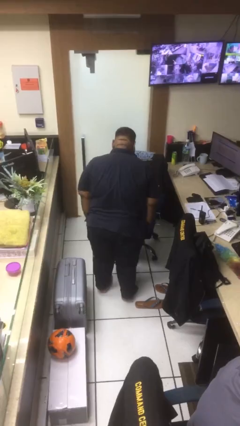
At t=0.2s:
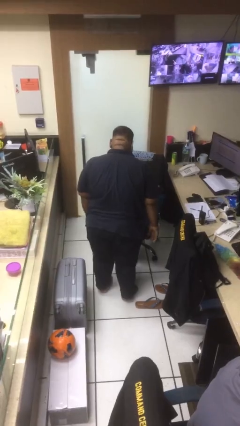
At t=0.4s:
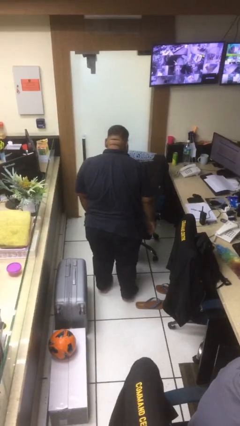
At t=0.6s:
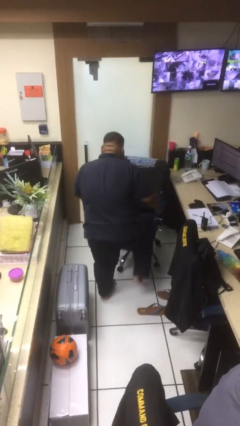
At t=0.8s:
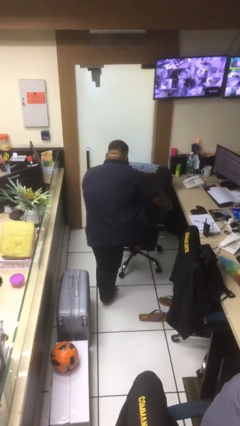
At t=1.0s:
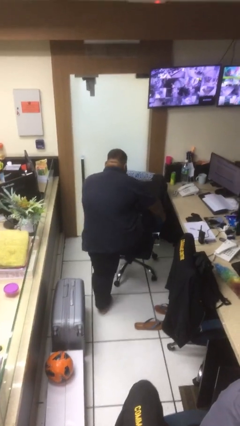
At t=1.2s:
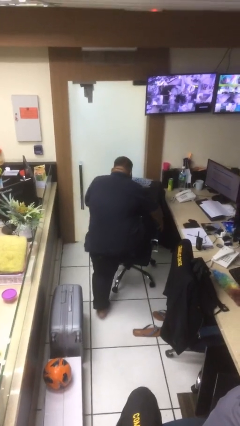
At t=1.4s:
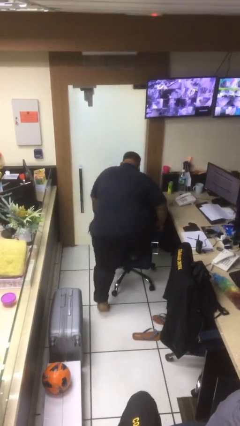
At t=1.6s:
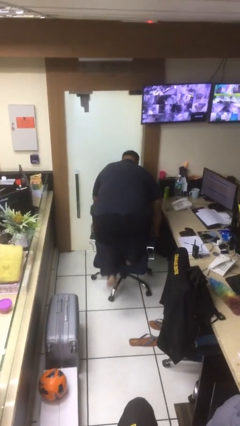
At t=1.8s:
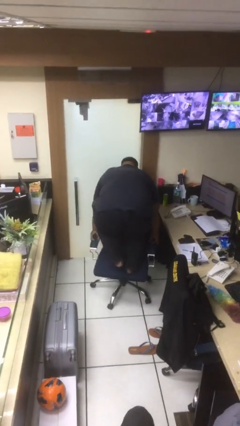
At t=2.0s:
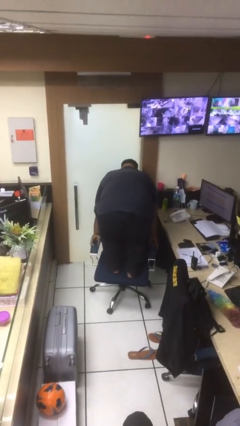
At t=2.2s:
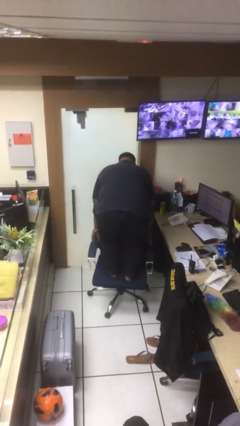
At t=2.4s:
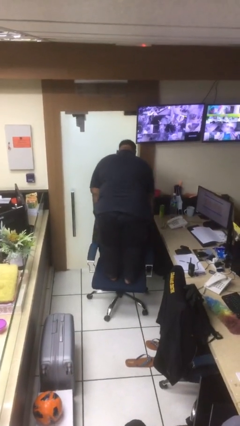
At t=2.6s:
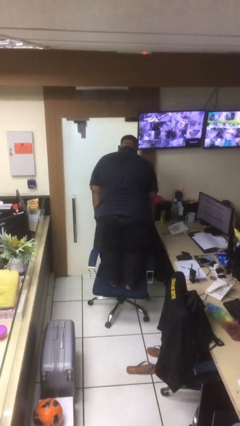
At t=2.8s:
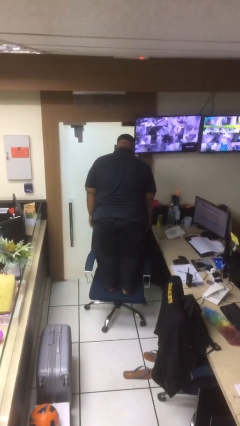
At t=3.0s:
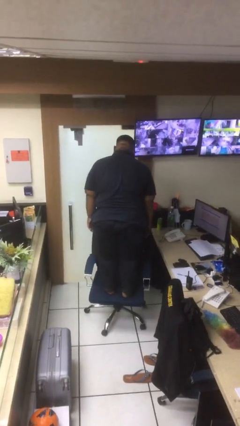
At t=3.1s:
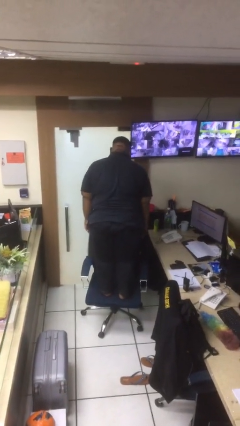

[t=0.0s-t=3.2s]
person climbs on chair

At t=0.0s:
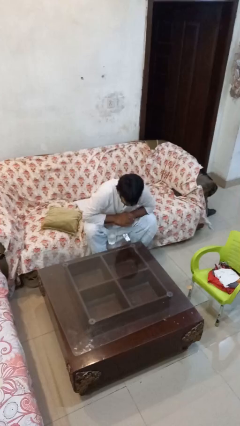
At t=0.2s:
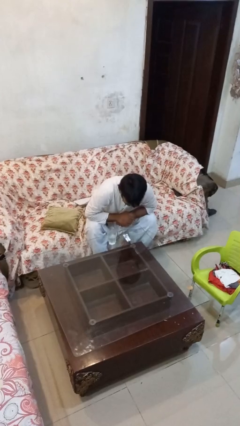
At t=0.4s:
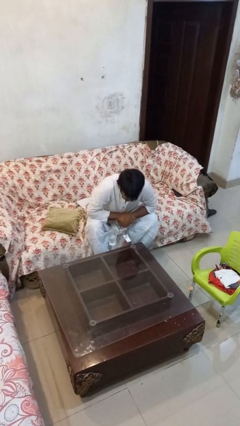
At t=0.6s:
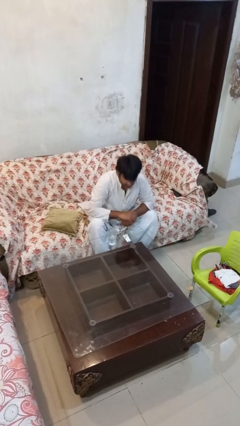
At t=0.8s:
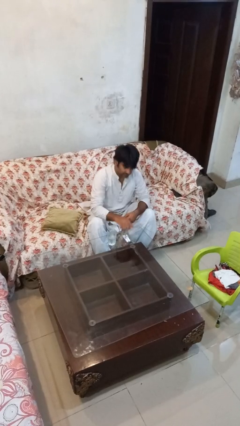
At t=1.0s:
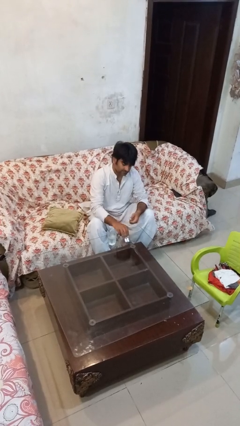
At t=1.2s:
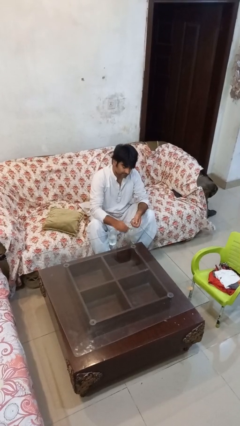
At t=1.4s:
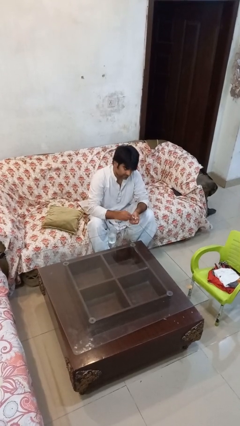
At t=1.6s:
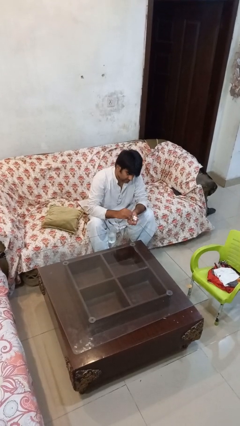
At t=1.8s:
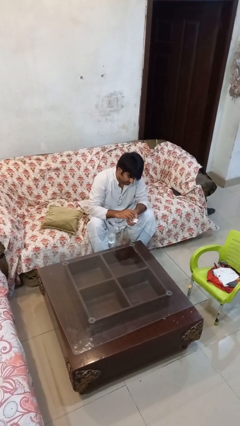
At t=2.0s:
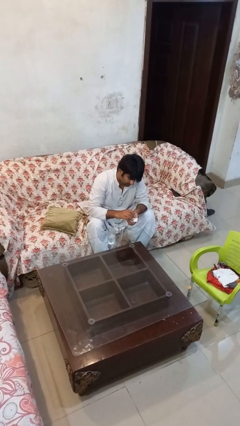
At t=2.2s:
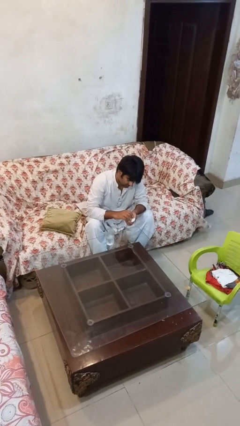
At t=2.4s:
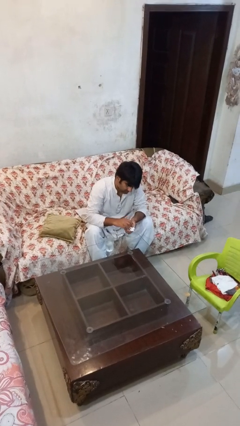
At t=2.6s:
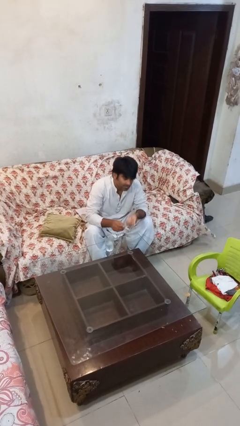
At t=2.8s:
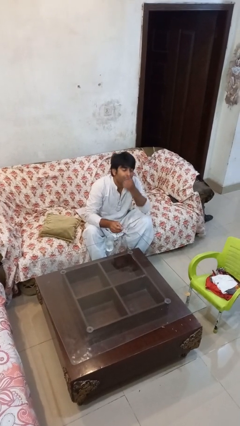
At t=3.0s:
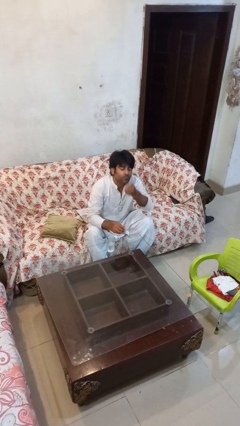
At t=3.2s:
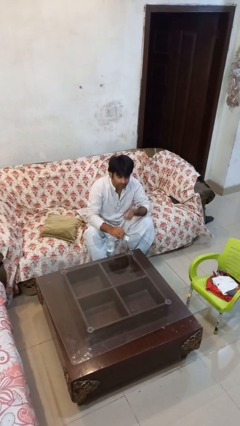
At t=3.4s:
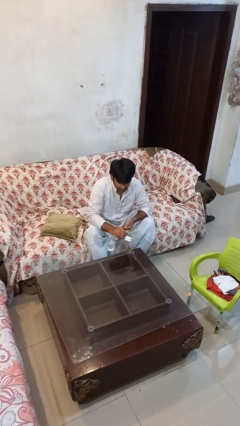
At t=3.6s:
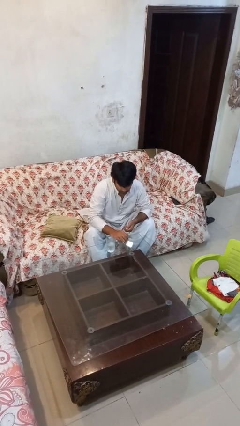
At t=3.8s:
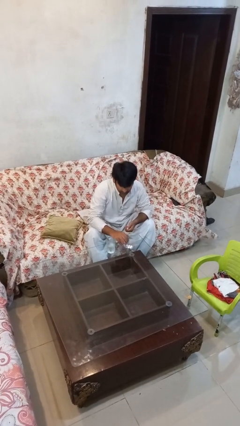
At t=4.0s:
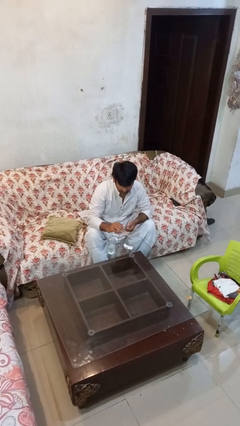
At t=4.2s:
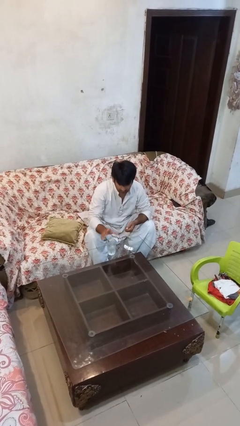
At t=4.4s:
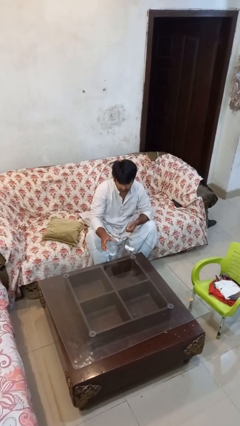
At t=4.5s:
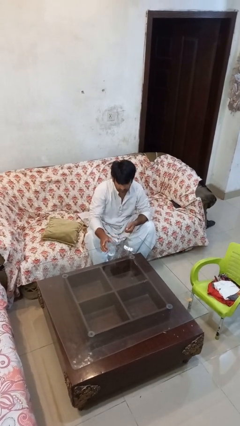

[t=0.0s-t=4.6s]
person takes medicine pills

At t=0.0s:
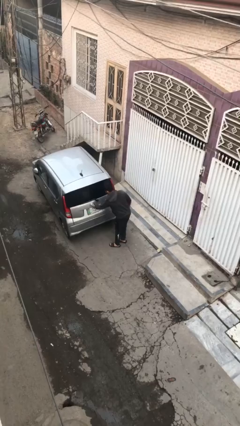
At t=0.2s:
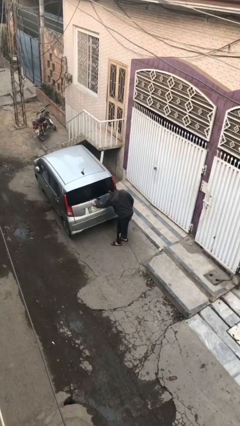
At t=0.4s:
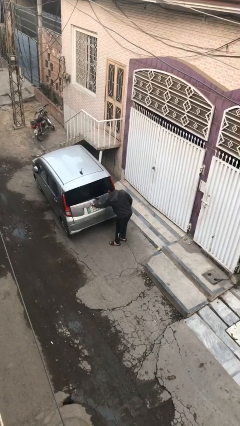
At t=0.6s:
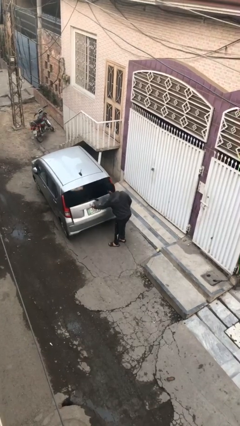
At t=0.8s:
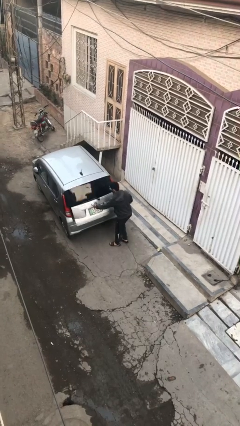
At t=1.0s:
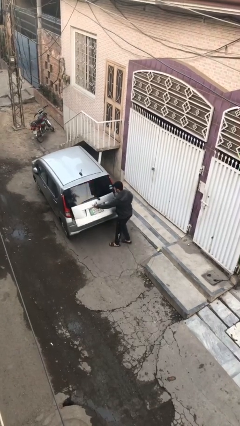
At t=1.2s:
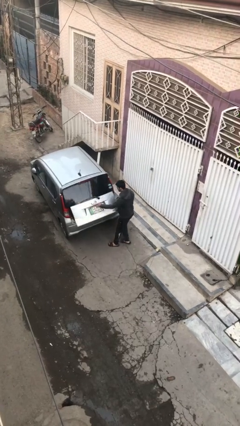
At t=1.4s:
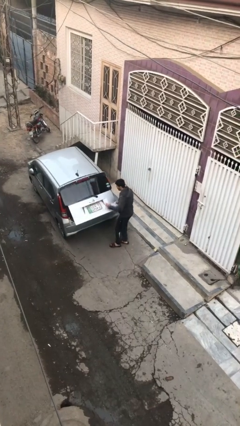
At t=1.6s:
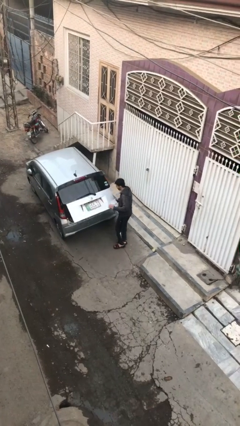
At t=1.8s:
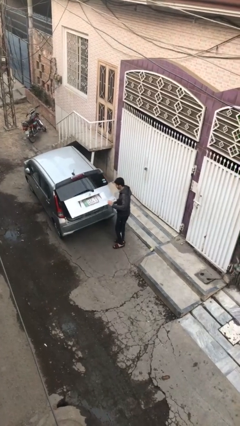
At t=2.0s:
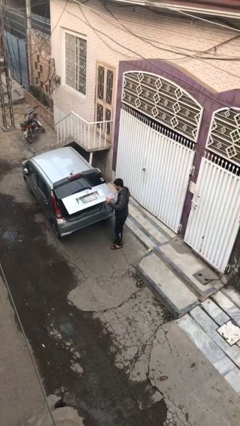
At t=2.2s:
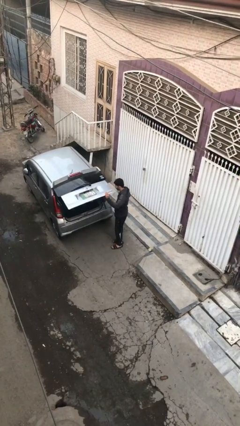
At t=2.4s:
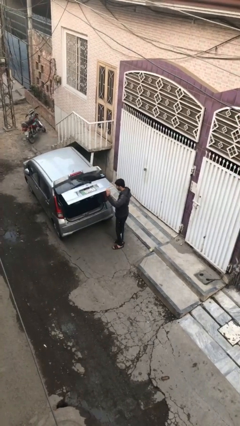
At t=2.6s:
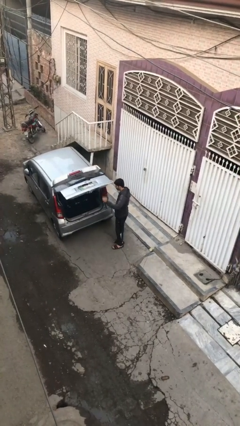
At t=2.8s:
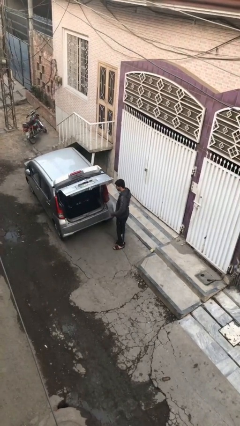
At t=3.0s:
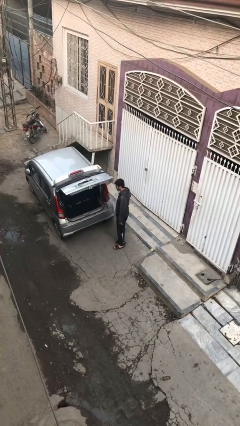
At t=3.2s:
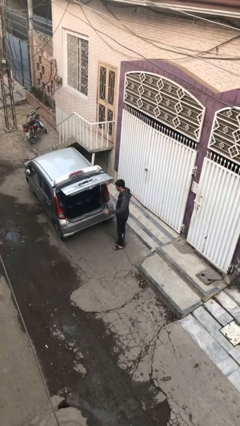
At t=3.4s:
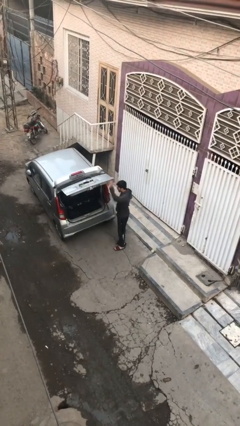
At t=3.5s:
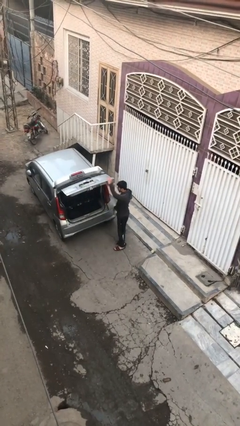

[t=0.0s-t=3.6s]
person opens car trunk

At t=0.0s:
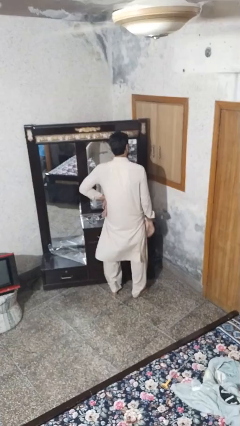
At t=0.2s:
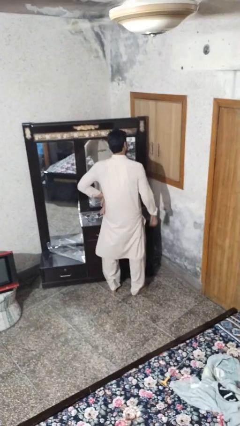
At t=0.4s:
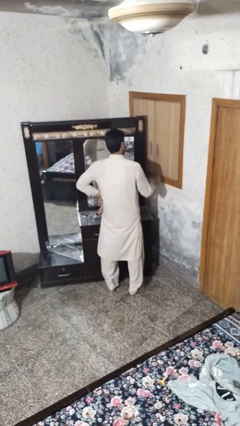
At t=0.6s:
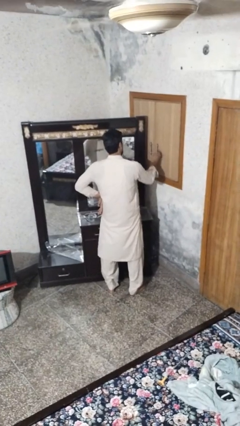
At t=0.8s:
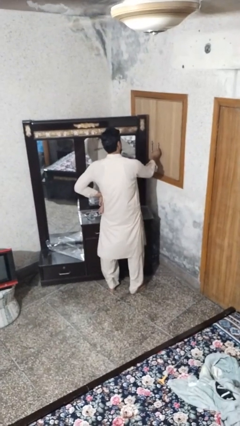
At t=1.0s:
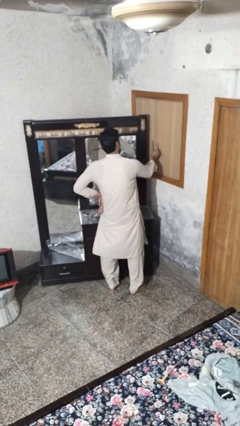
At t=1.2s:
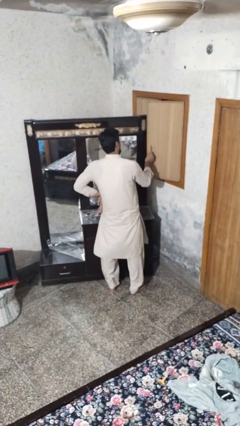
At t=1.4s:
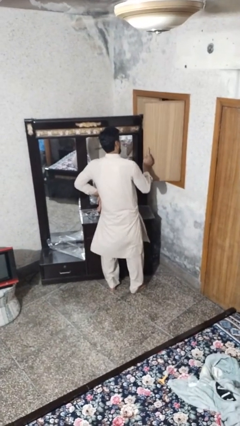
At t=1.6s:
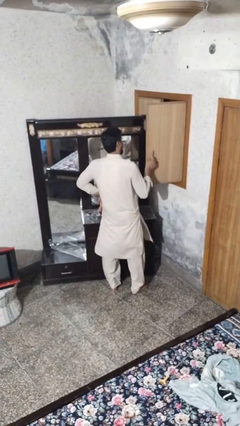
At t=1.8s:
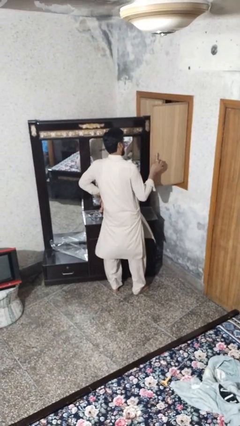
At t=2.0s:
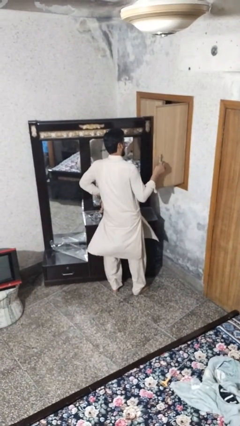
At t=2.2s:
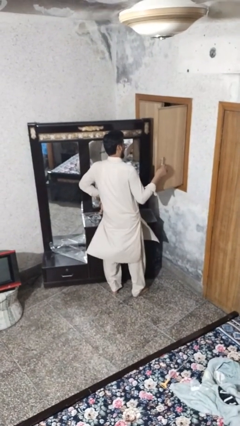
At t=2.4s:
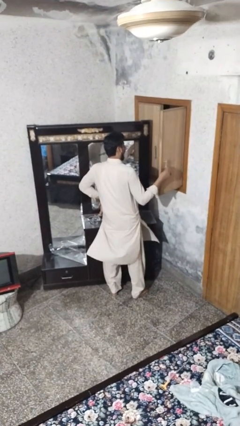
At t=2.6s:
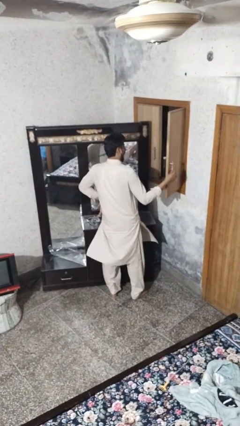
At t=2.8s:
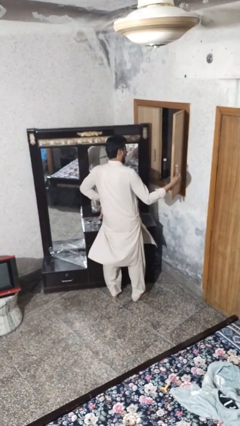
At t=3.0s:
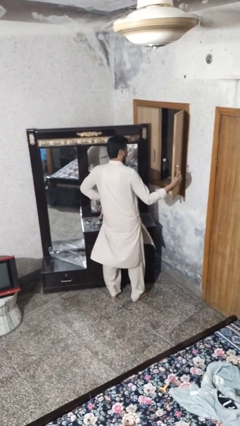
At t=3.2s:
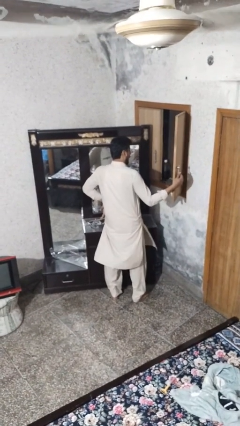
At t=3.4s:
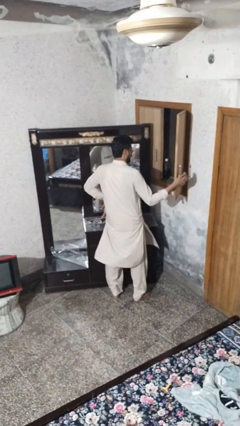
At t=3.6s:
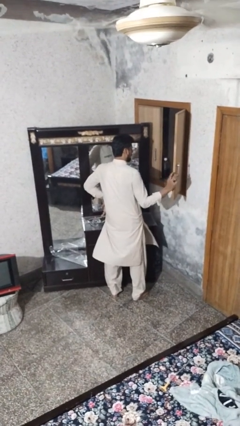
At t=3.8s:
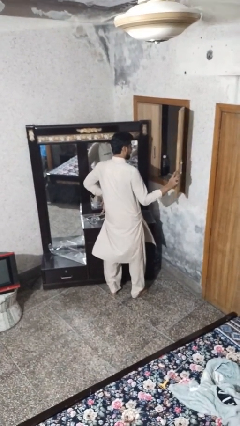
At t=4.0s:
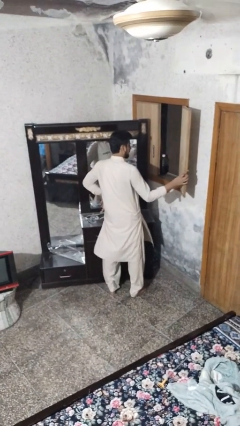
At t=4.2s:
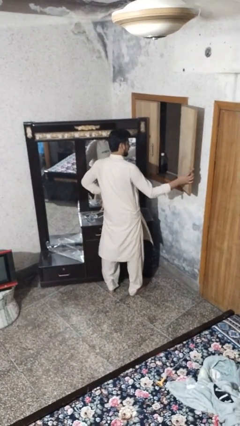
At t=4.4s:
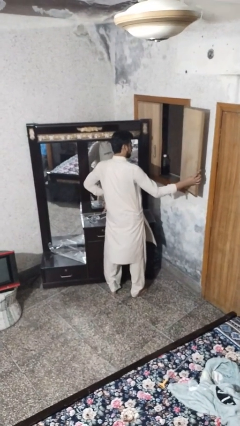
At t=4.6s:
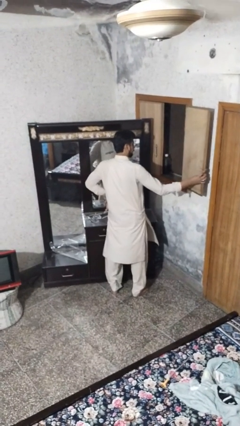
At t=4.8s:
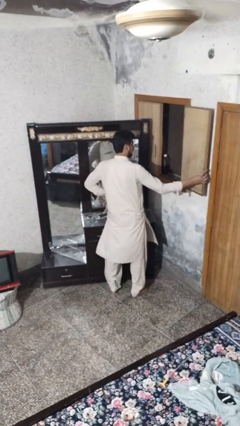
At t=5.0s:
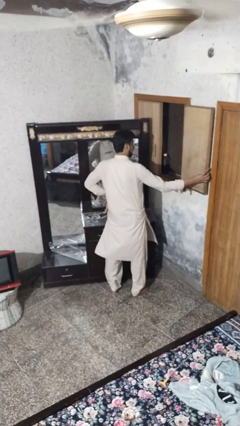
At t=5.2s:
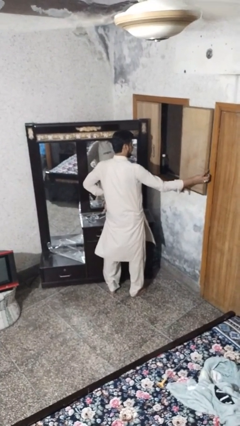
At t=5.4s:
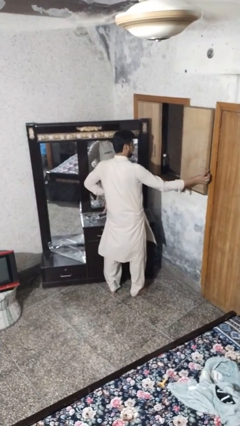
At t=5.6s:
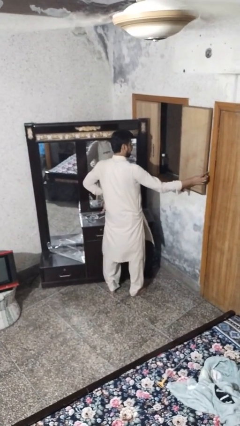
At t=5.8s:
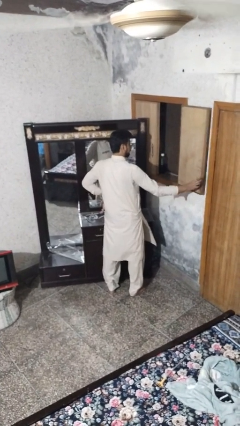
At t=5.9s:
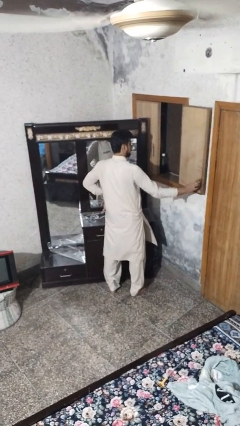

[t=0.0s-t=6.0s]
person opens home window

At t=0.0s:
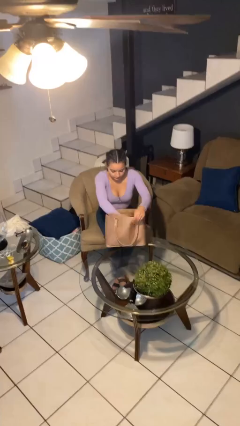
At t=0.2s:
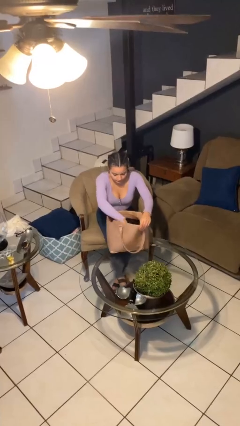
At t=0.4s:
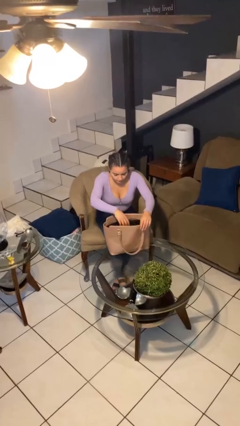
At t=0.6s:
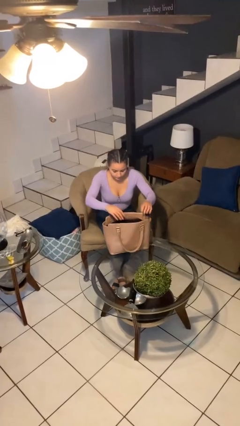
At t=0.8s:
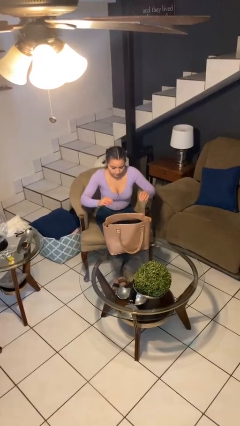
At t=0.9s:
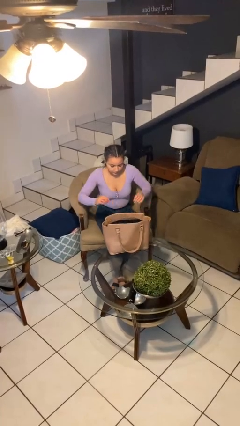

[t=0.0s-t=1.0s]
person puts object into purse
